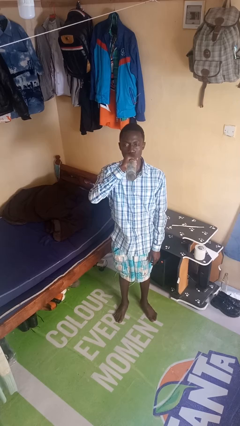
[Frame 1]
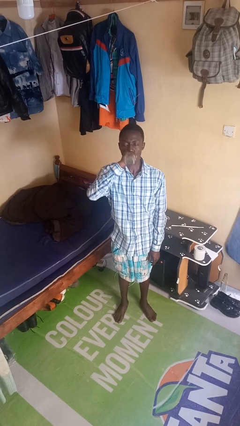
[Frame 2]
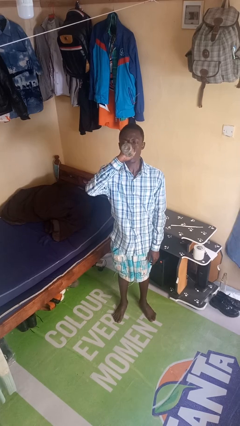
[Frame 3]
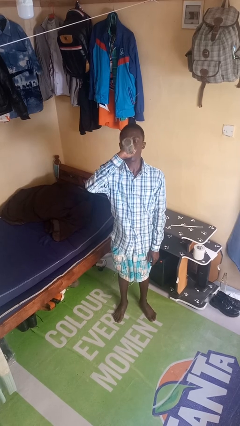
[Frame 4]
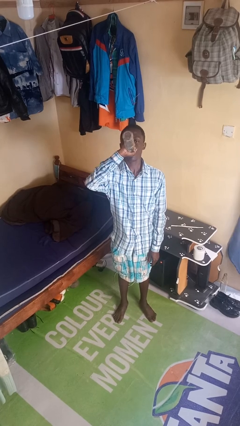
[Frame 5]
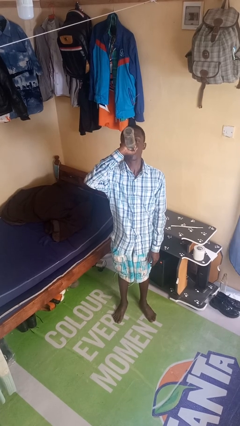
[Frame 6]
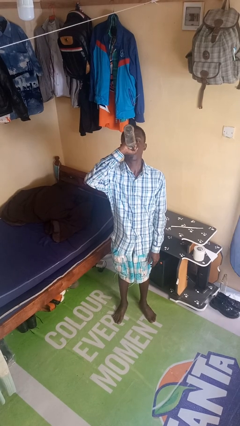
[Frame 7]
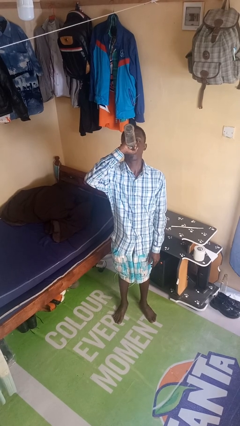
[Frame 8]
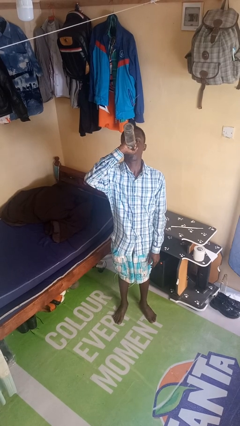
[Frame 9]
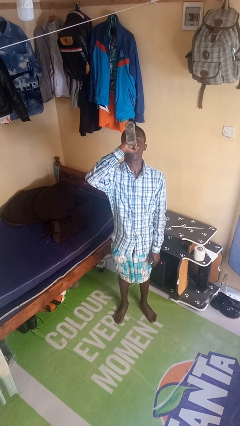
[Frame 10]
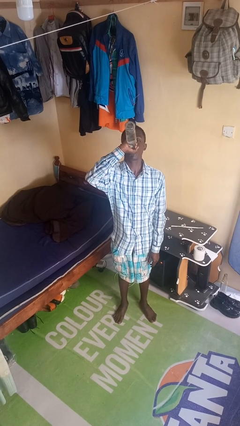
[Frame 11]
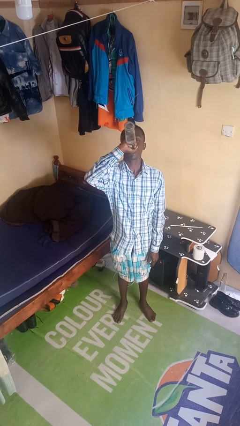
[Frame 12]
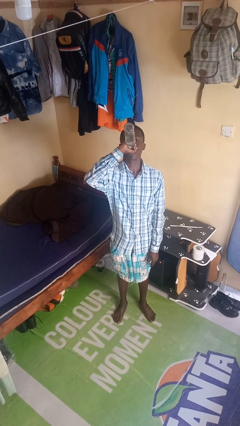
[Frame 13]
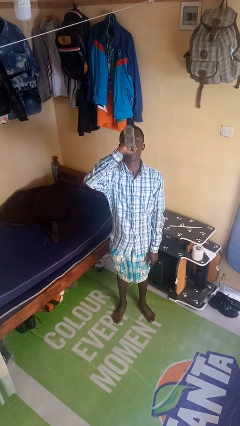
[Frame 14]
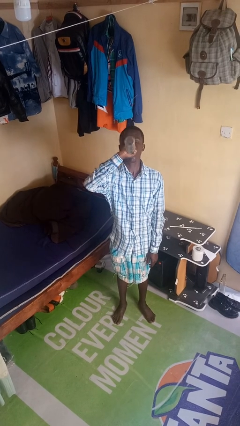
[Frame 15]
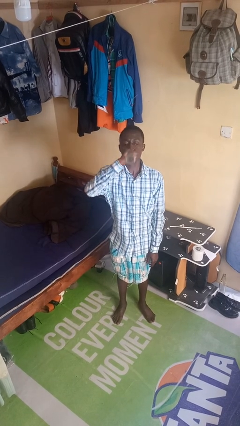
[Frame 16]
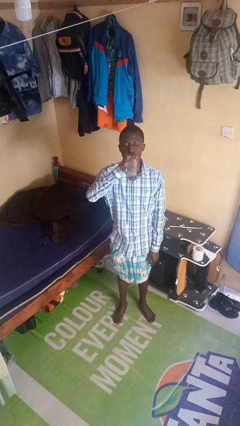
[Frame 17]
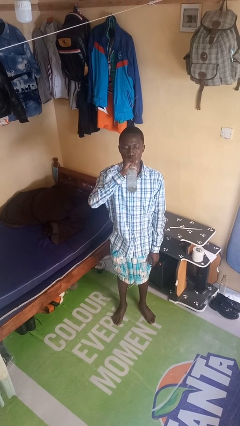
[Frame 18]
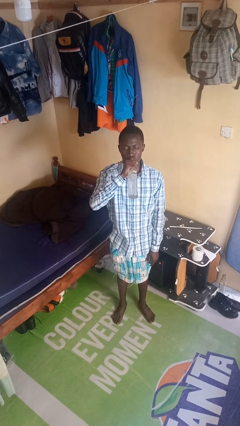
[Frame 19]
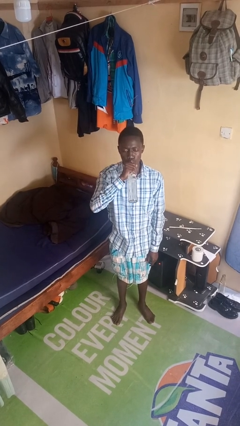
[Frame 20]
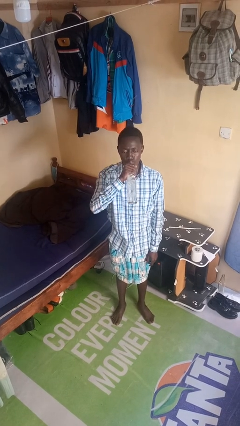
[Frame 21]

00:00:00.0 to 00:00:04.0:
person drinks from bottle

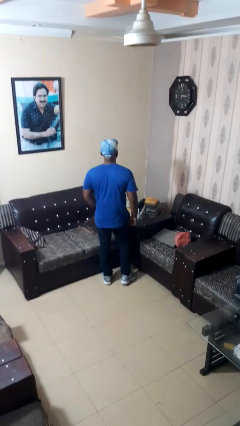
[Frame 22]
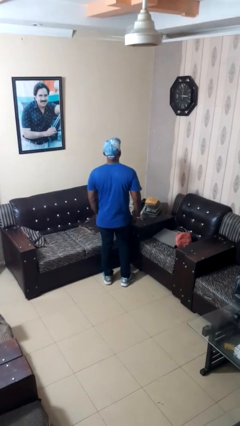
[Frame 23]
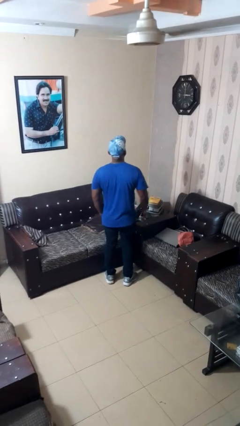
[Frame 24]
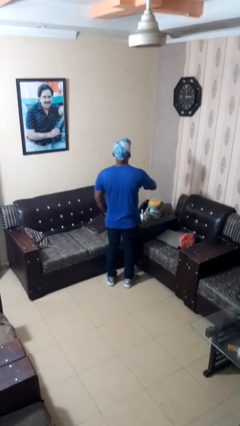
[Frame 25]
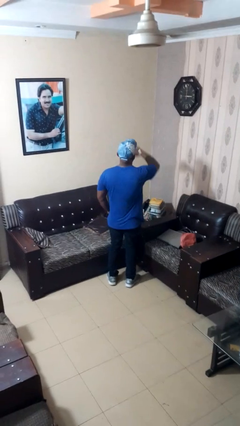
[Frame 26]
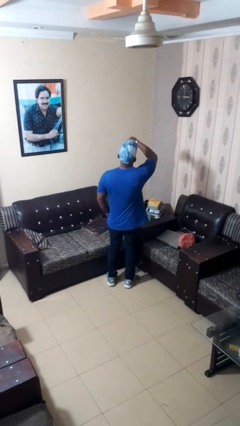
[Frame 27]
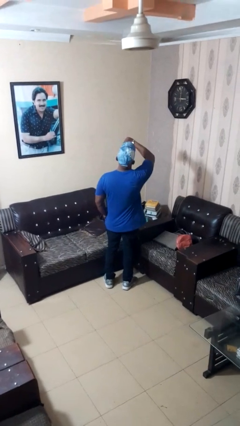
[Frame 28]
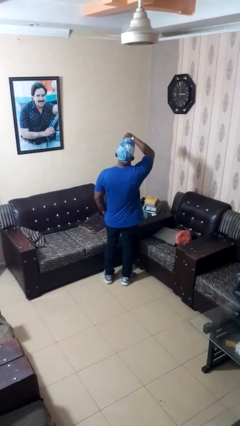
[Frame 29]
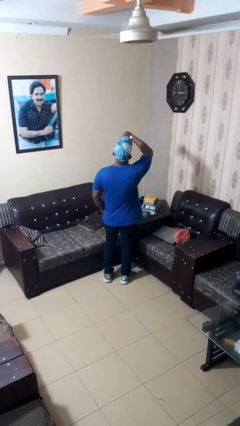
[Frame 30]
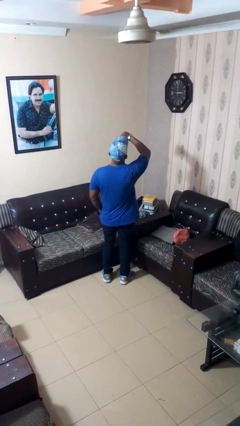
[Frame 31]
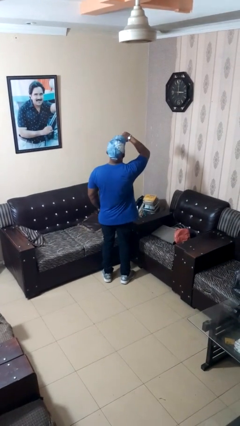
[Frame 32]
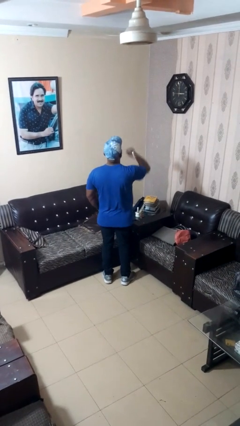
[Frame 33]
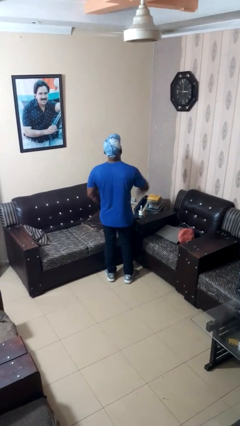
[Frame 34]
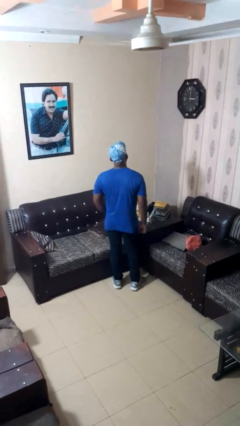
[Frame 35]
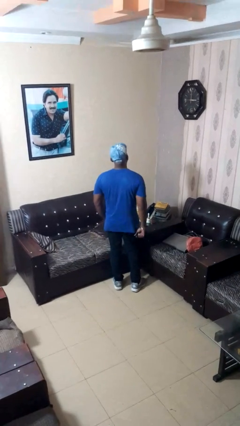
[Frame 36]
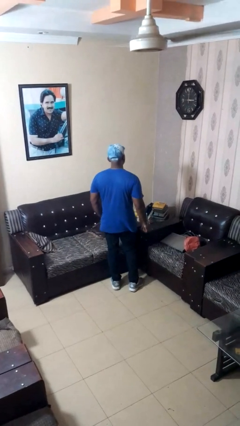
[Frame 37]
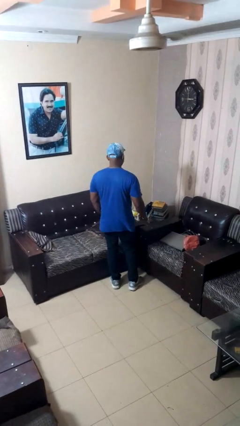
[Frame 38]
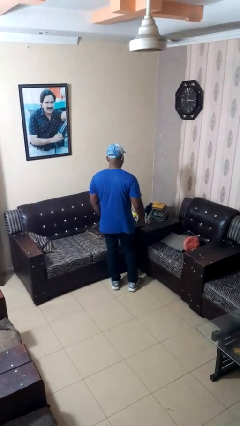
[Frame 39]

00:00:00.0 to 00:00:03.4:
person looks at wristwatch

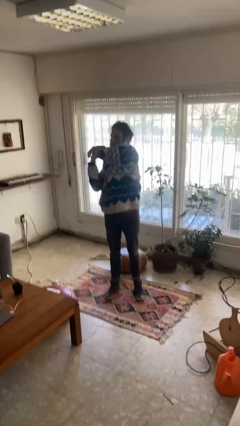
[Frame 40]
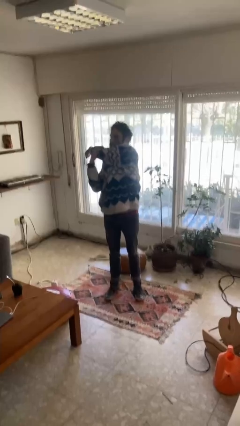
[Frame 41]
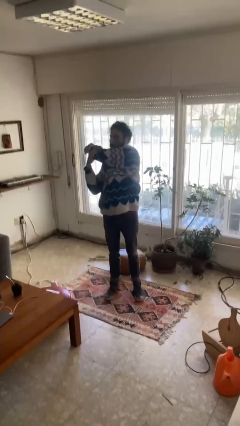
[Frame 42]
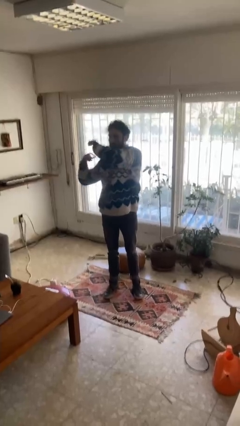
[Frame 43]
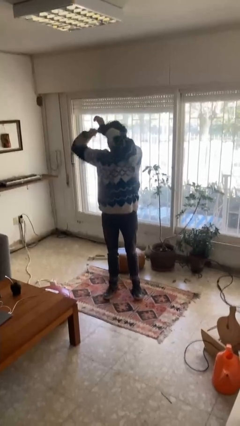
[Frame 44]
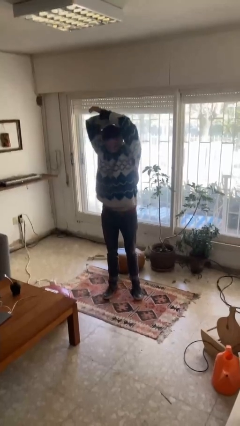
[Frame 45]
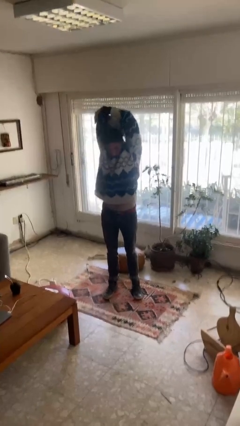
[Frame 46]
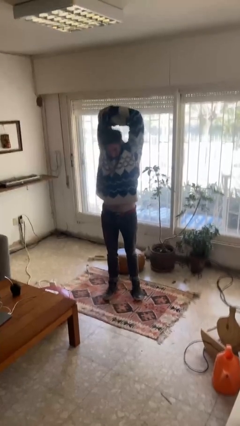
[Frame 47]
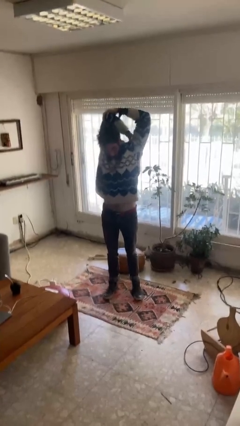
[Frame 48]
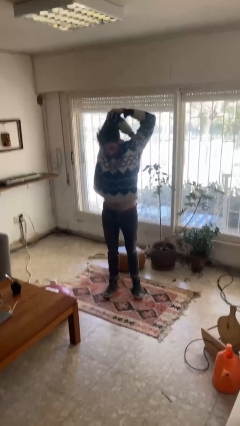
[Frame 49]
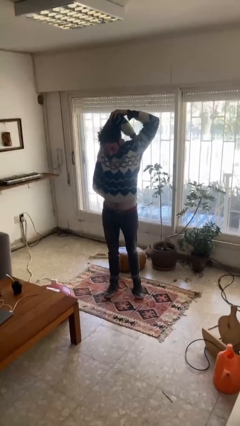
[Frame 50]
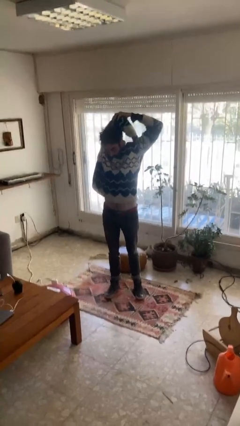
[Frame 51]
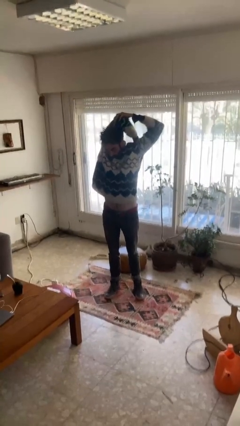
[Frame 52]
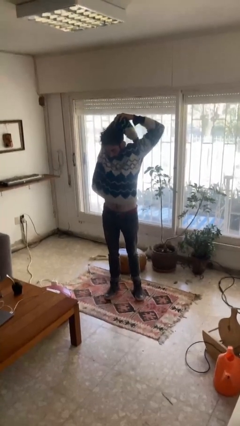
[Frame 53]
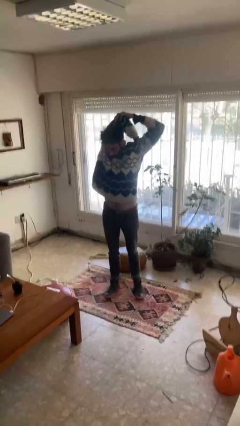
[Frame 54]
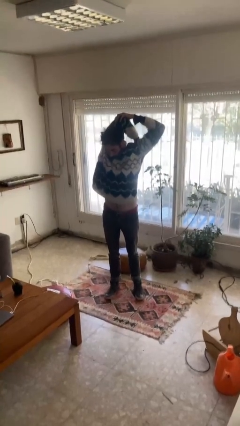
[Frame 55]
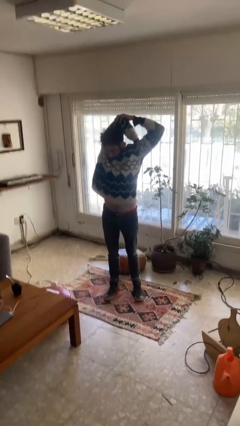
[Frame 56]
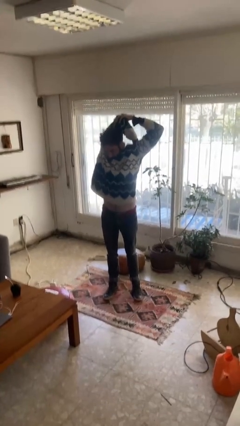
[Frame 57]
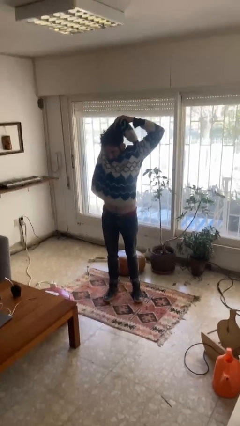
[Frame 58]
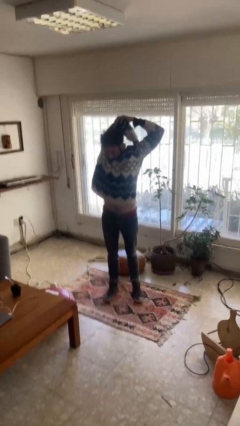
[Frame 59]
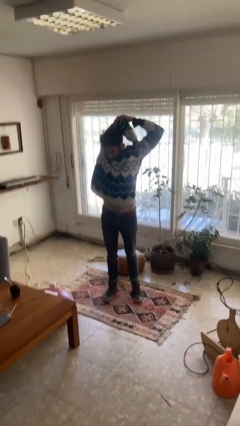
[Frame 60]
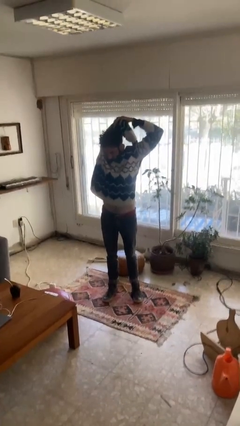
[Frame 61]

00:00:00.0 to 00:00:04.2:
person stretches arms over head

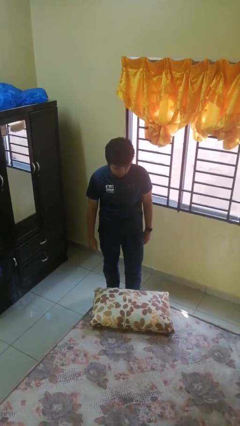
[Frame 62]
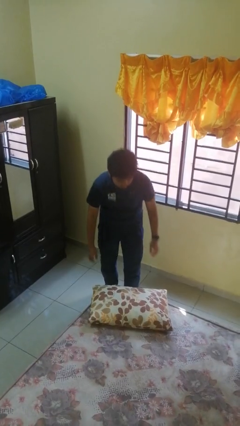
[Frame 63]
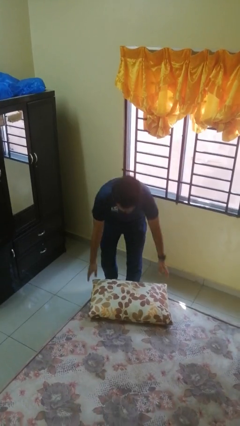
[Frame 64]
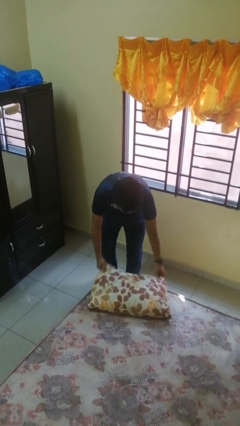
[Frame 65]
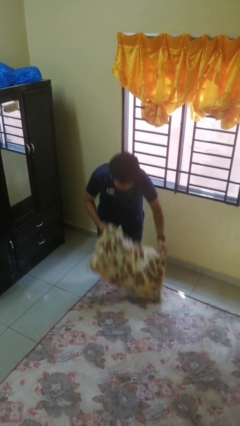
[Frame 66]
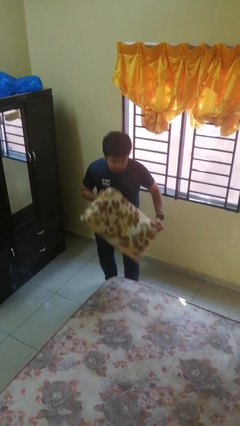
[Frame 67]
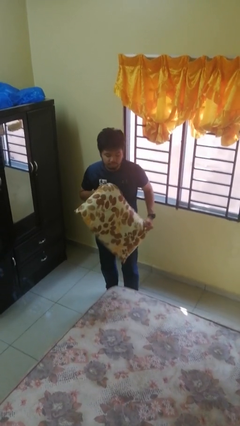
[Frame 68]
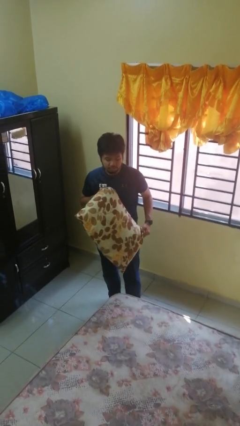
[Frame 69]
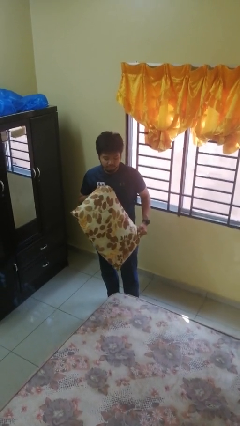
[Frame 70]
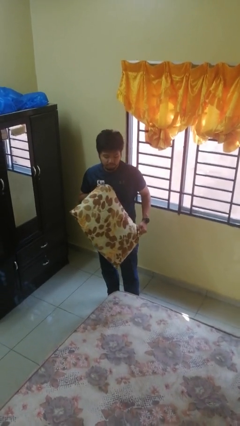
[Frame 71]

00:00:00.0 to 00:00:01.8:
person picks up object from bed

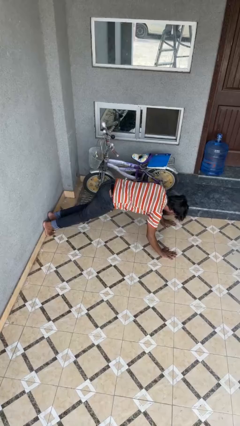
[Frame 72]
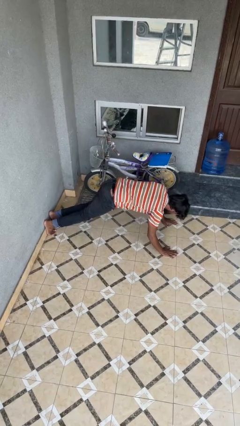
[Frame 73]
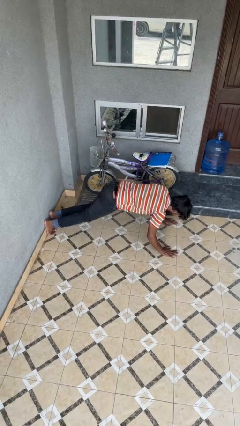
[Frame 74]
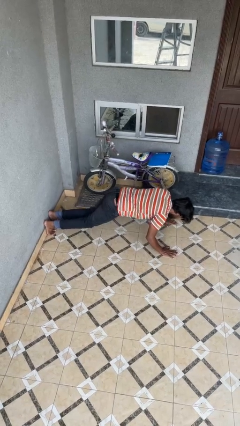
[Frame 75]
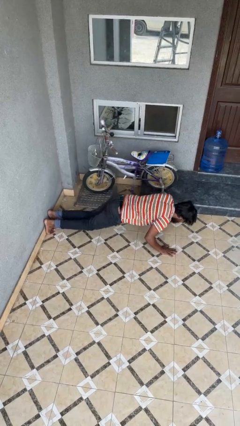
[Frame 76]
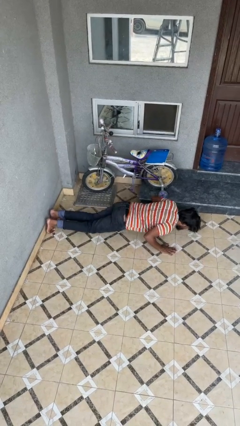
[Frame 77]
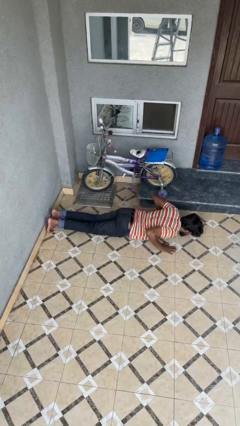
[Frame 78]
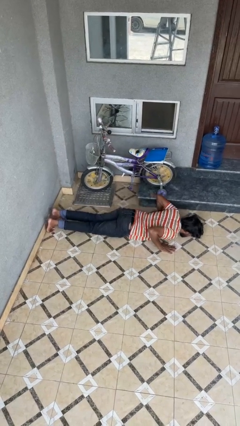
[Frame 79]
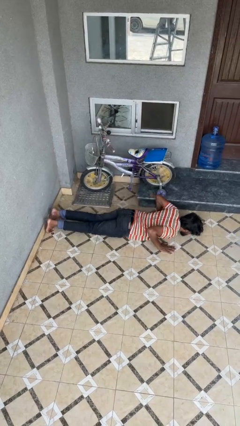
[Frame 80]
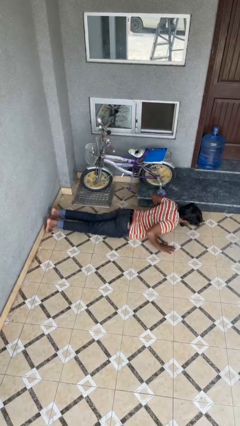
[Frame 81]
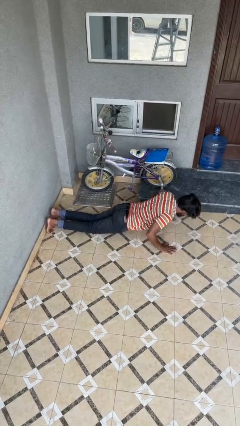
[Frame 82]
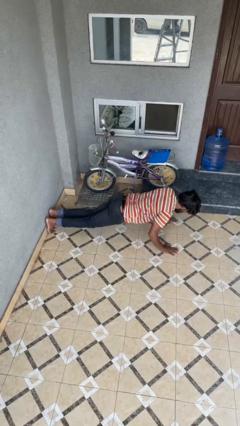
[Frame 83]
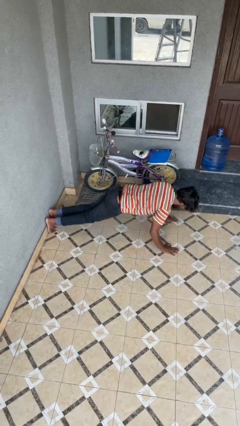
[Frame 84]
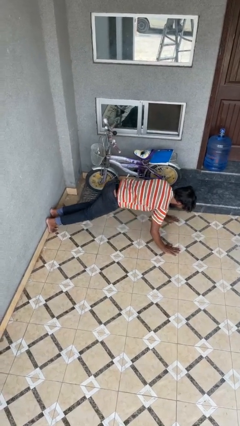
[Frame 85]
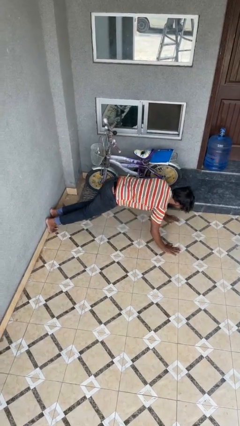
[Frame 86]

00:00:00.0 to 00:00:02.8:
person exercises with pushup

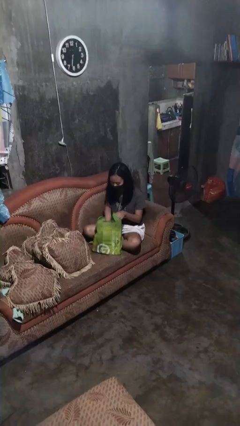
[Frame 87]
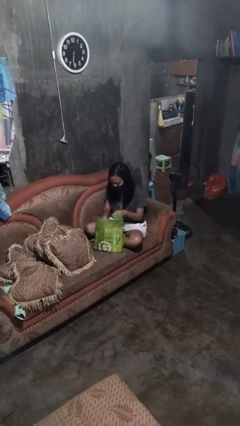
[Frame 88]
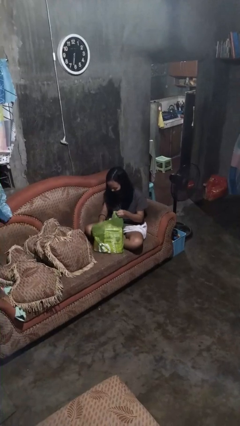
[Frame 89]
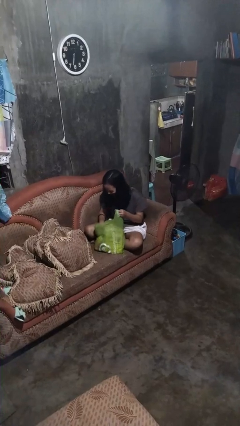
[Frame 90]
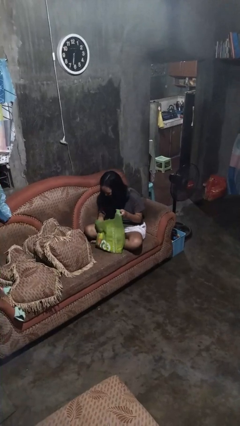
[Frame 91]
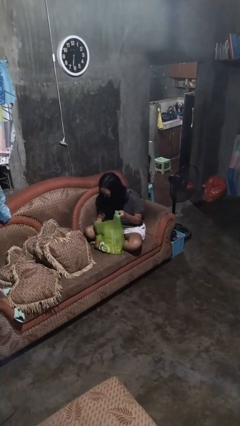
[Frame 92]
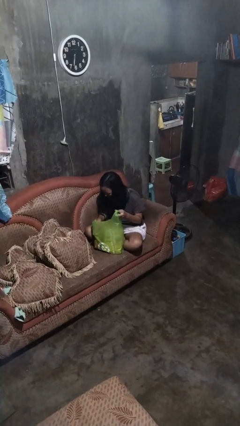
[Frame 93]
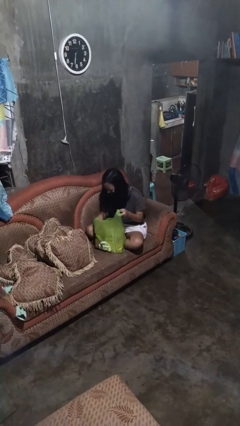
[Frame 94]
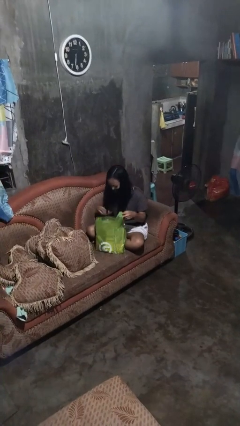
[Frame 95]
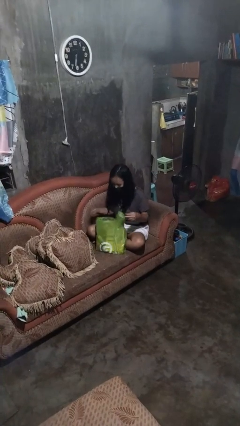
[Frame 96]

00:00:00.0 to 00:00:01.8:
person searches in bag
